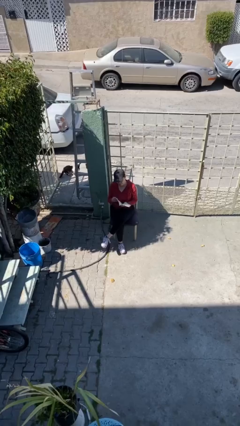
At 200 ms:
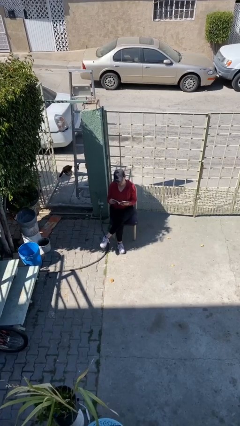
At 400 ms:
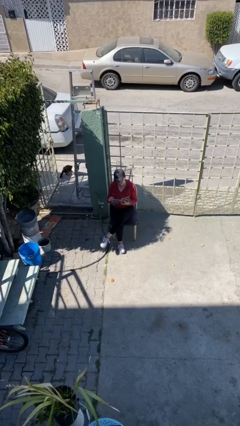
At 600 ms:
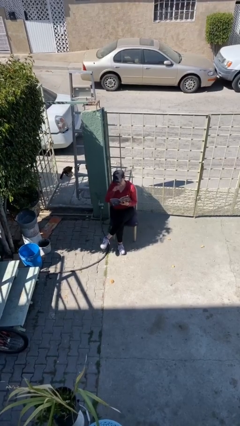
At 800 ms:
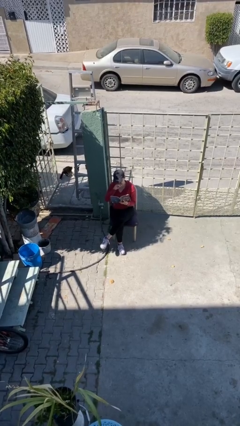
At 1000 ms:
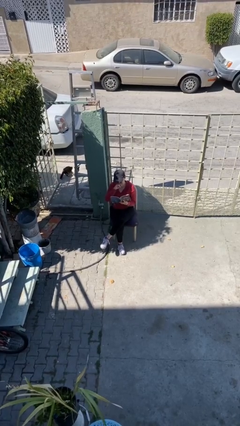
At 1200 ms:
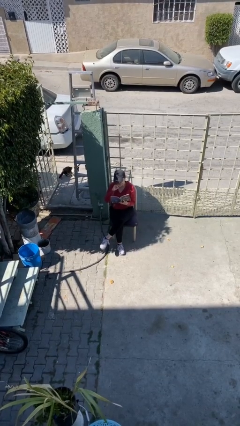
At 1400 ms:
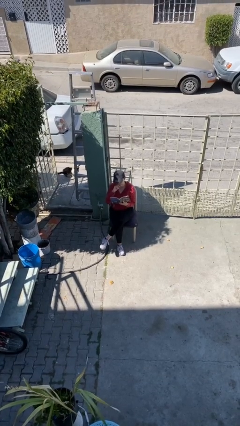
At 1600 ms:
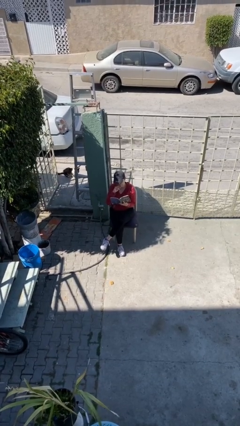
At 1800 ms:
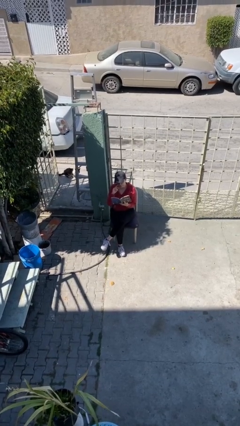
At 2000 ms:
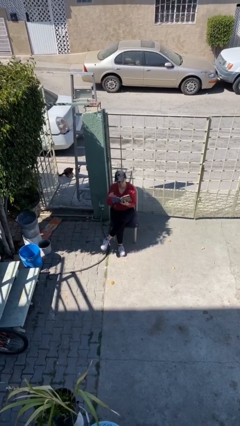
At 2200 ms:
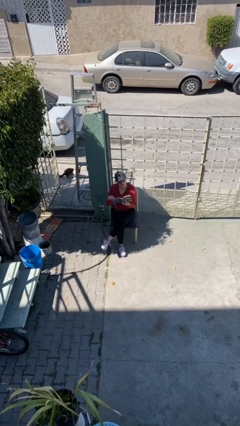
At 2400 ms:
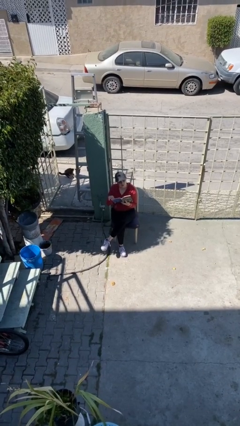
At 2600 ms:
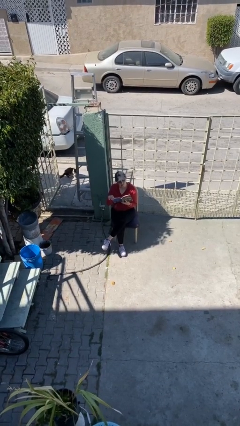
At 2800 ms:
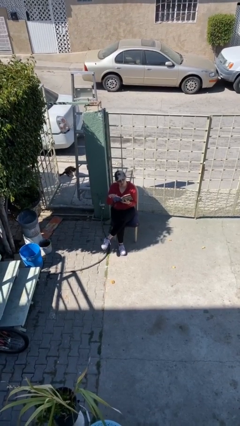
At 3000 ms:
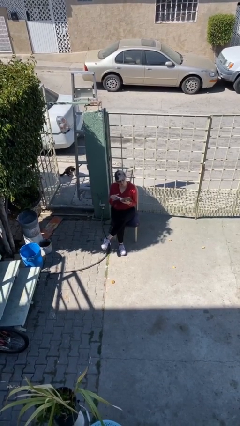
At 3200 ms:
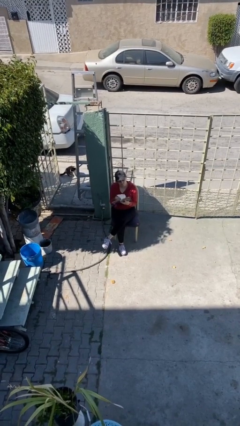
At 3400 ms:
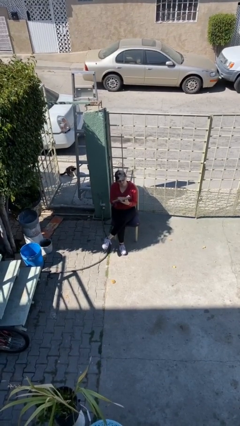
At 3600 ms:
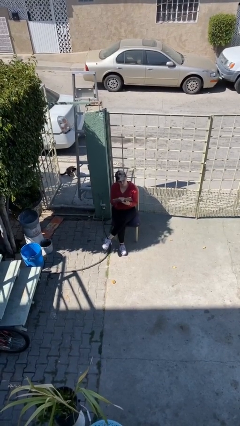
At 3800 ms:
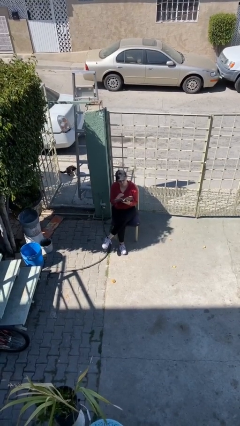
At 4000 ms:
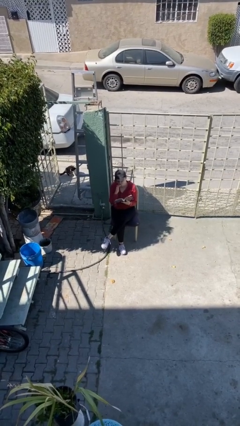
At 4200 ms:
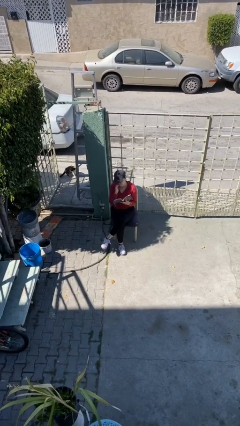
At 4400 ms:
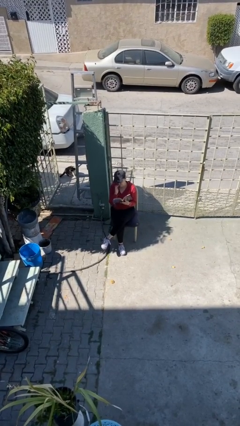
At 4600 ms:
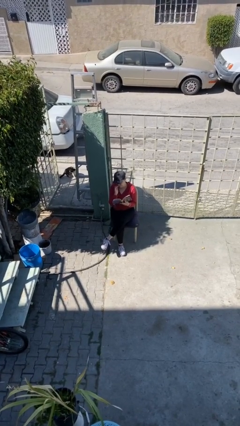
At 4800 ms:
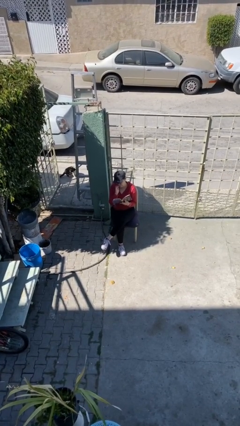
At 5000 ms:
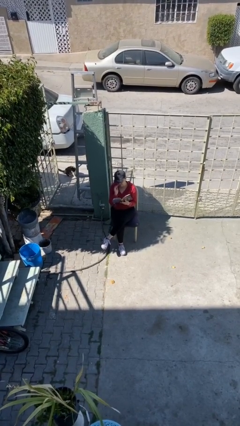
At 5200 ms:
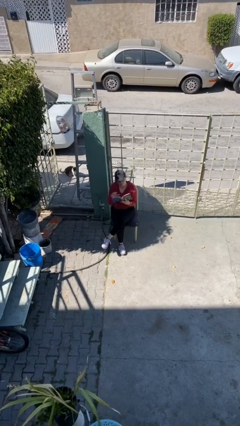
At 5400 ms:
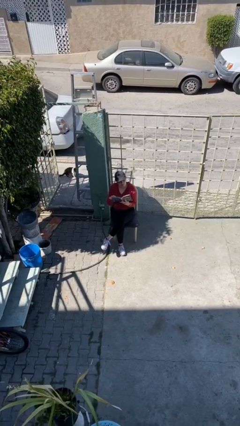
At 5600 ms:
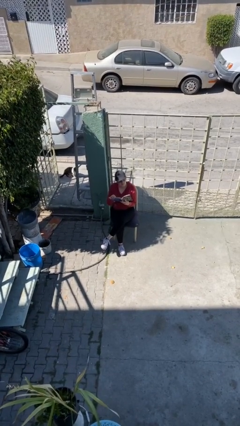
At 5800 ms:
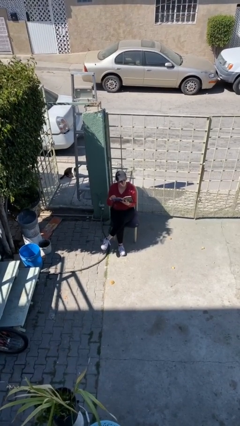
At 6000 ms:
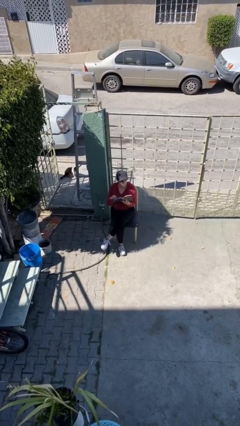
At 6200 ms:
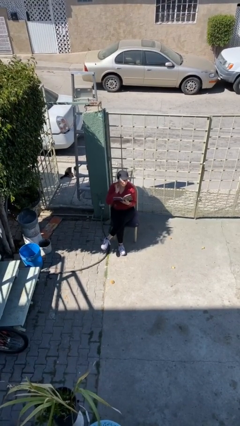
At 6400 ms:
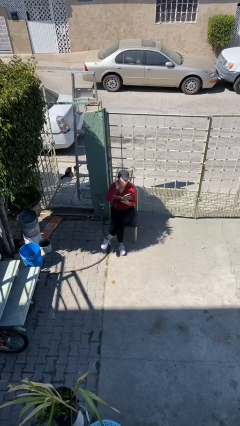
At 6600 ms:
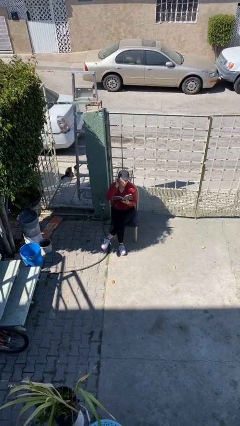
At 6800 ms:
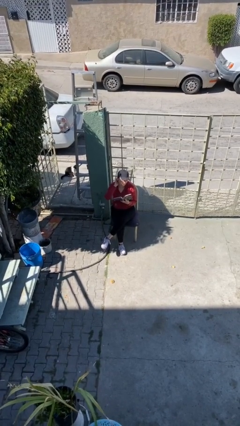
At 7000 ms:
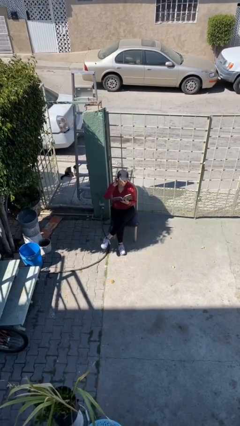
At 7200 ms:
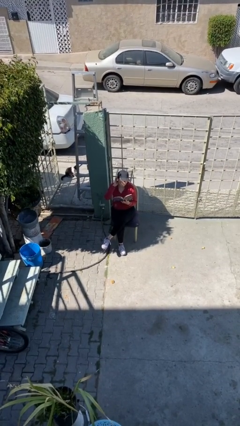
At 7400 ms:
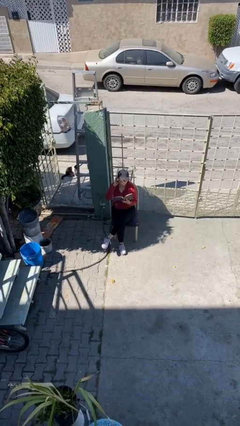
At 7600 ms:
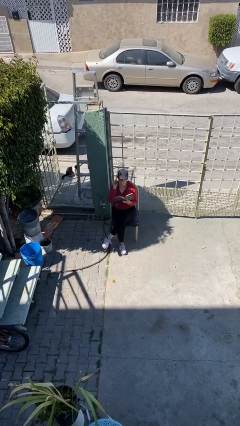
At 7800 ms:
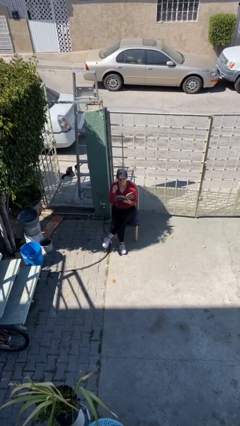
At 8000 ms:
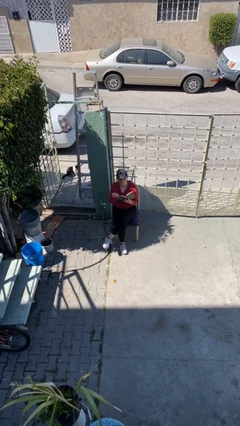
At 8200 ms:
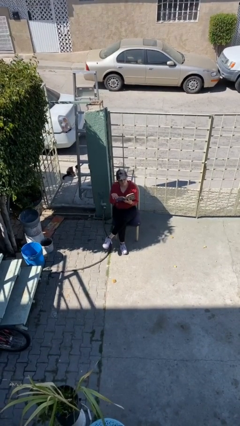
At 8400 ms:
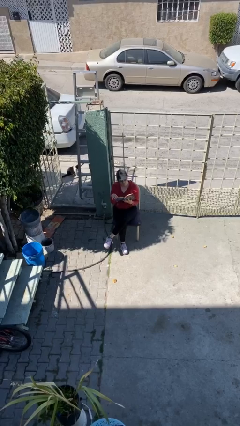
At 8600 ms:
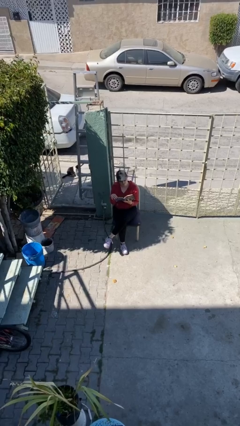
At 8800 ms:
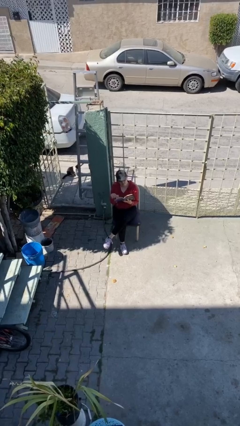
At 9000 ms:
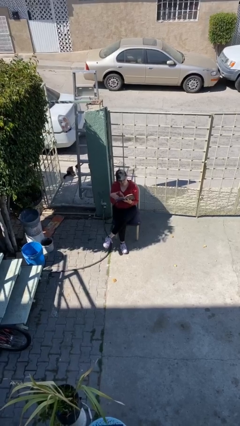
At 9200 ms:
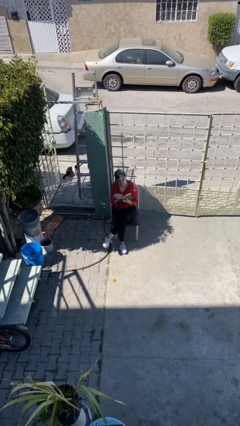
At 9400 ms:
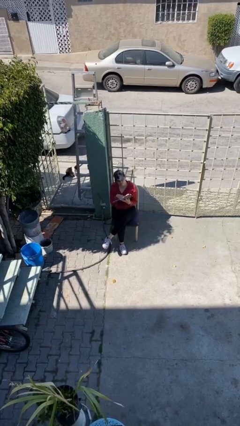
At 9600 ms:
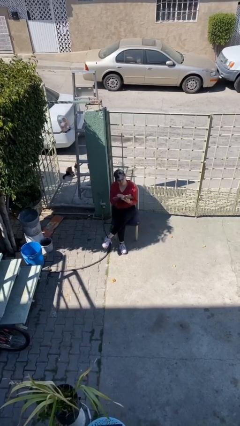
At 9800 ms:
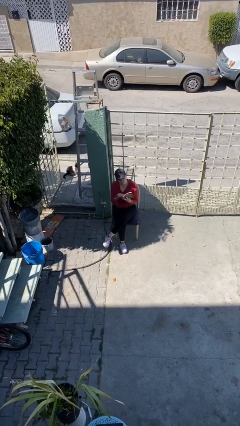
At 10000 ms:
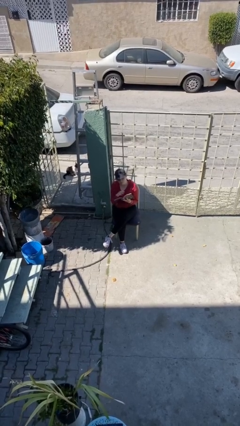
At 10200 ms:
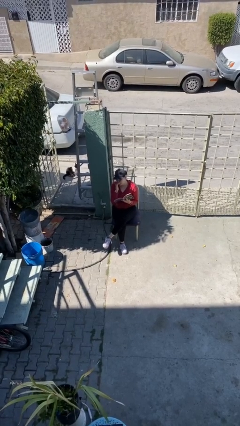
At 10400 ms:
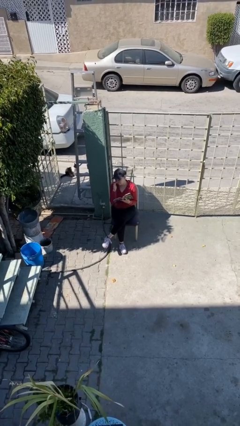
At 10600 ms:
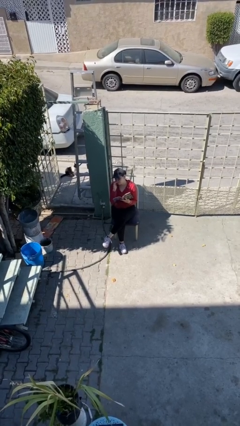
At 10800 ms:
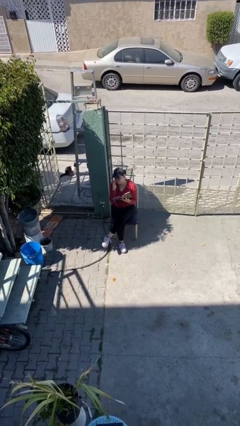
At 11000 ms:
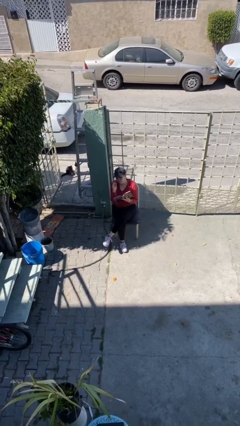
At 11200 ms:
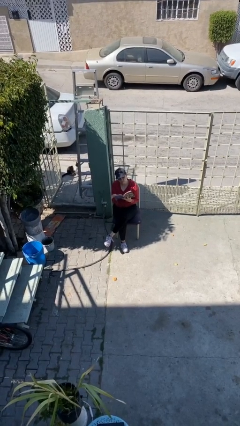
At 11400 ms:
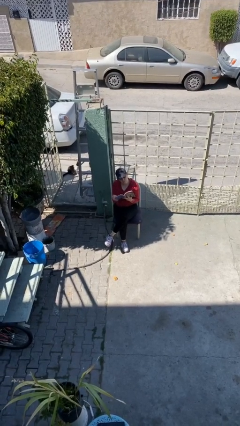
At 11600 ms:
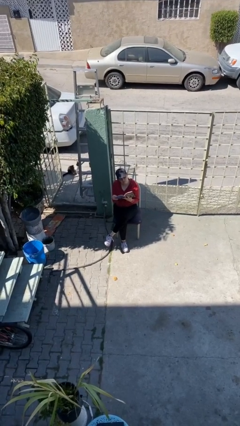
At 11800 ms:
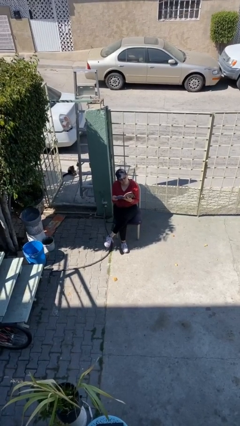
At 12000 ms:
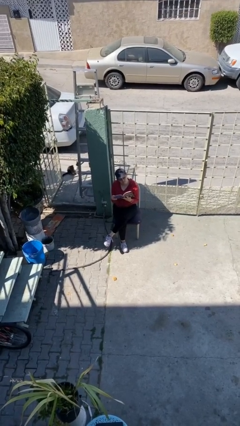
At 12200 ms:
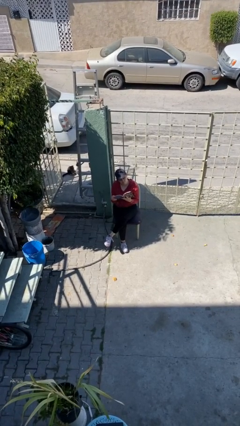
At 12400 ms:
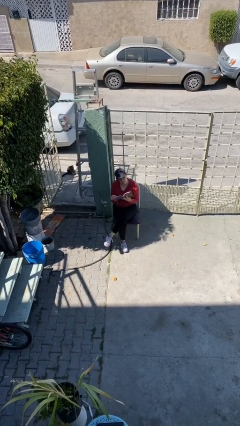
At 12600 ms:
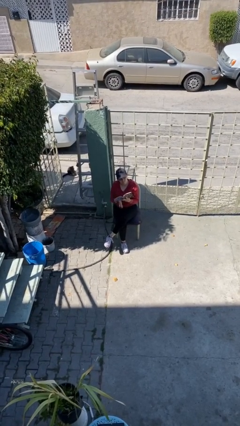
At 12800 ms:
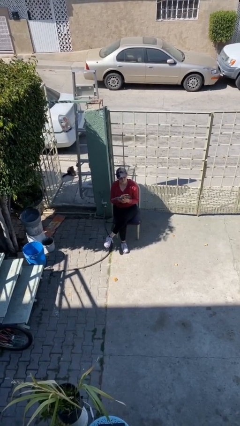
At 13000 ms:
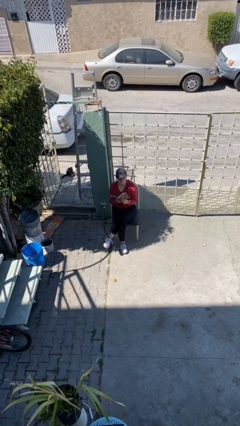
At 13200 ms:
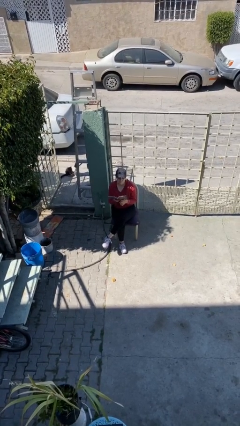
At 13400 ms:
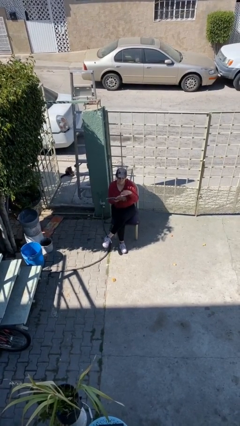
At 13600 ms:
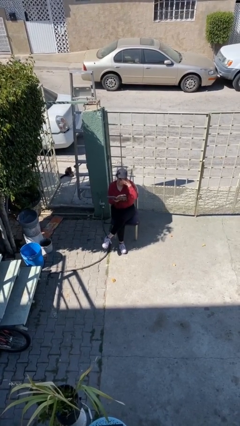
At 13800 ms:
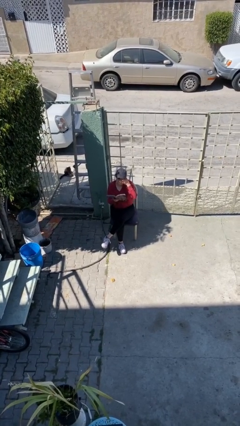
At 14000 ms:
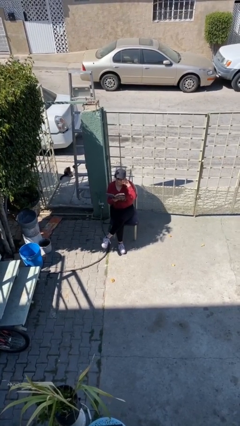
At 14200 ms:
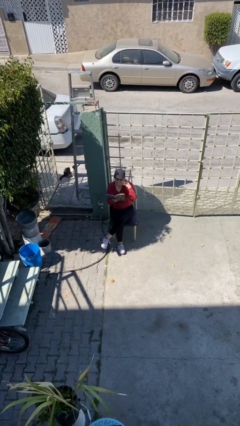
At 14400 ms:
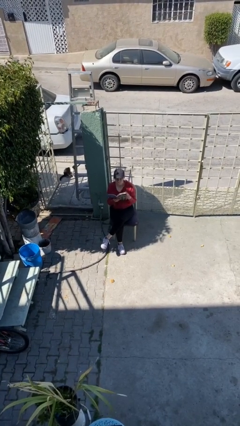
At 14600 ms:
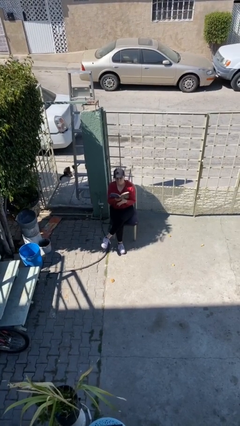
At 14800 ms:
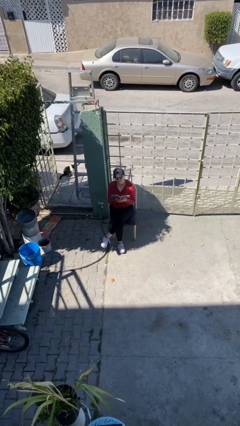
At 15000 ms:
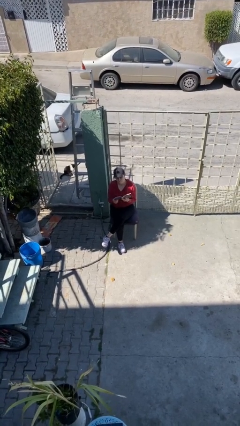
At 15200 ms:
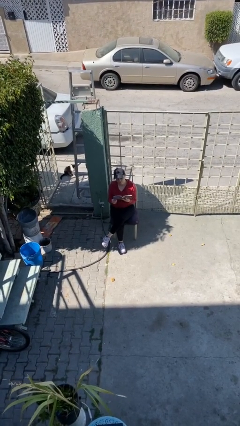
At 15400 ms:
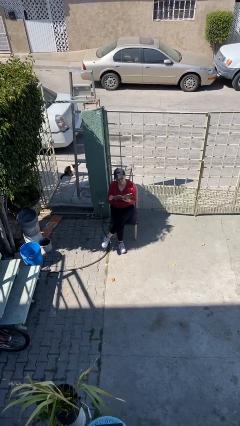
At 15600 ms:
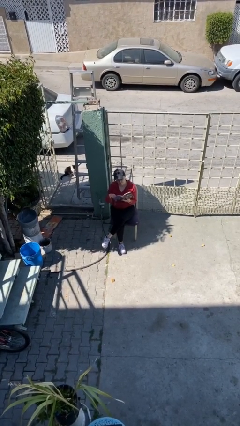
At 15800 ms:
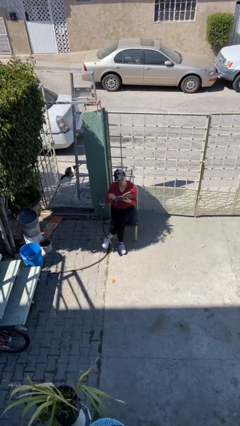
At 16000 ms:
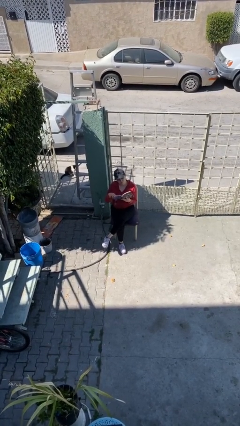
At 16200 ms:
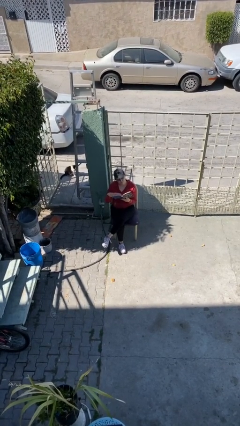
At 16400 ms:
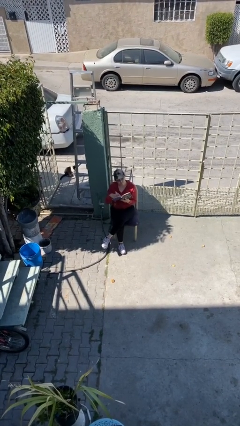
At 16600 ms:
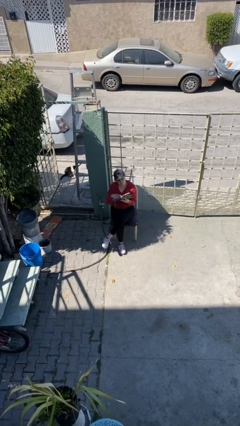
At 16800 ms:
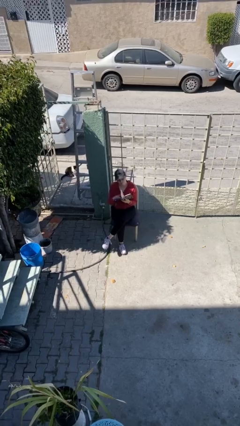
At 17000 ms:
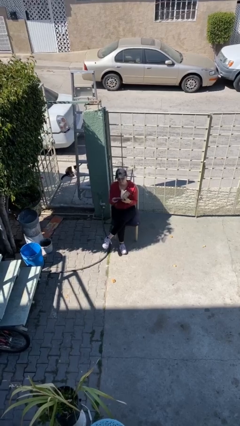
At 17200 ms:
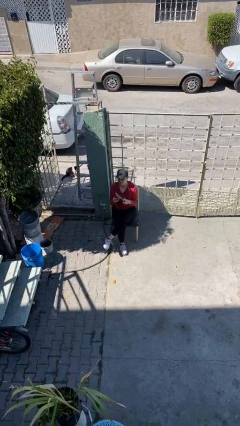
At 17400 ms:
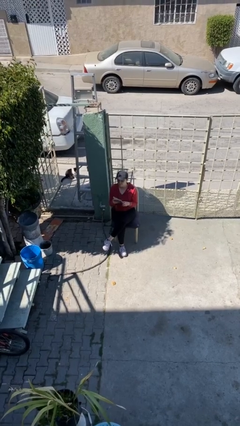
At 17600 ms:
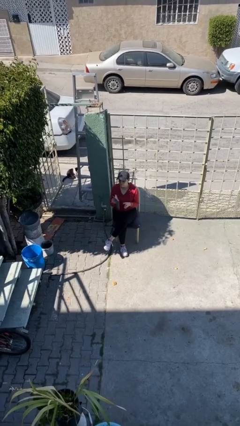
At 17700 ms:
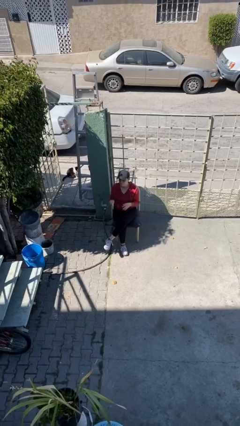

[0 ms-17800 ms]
person reads document
